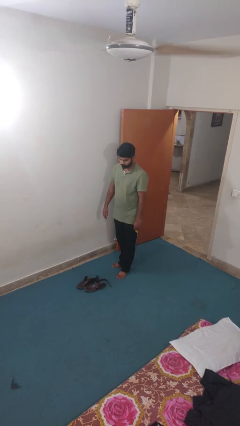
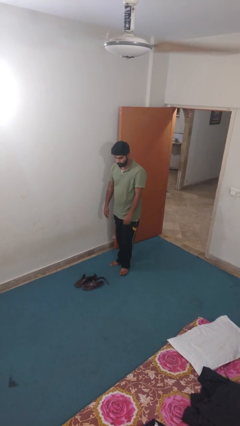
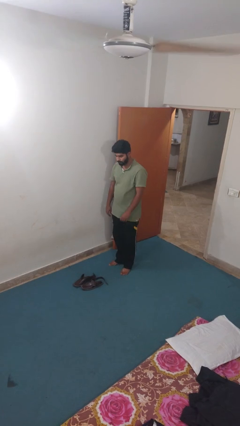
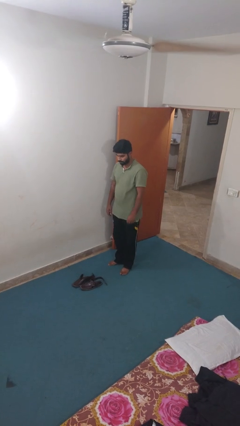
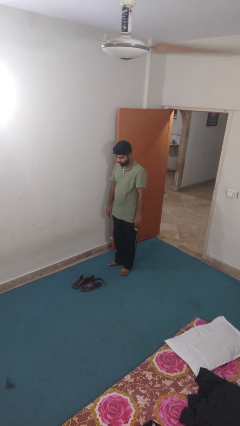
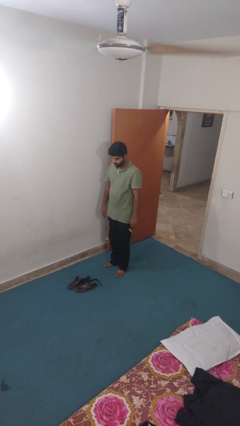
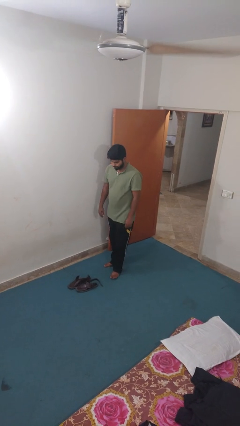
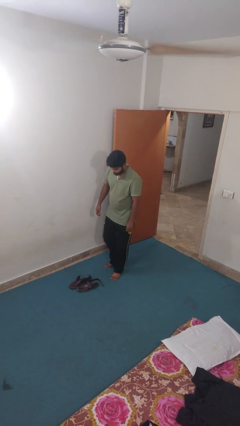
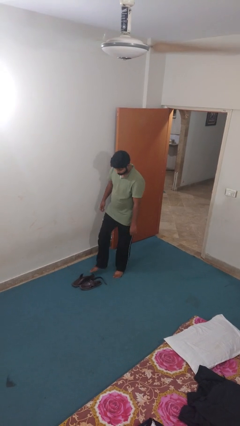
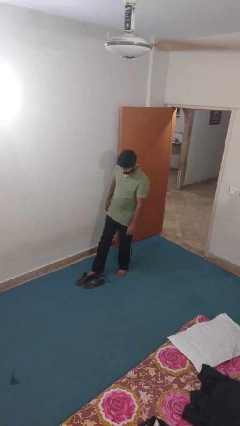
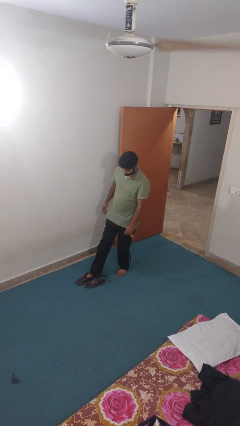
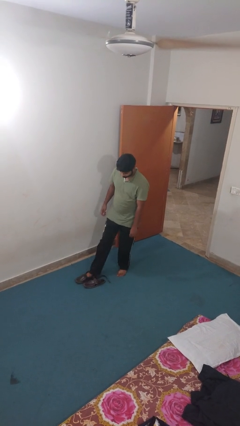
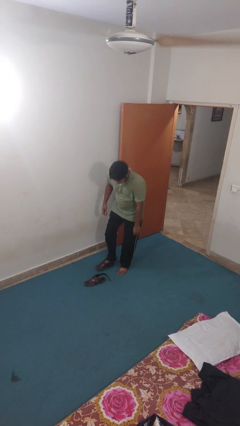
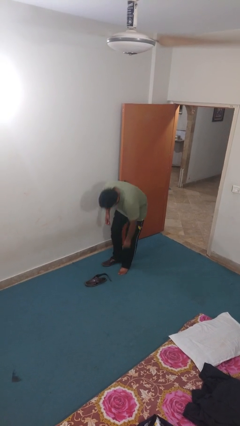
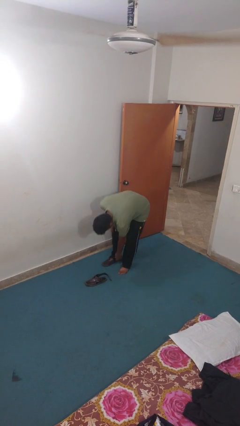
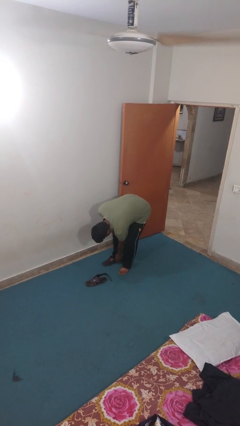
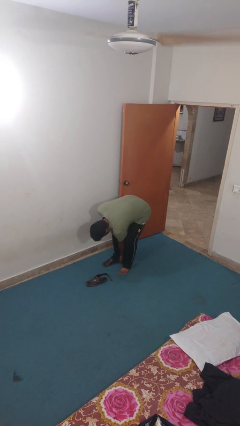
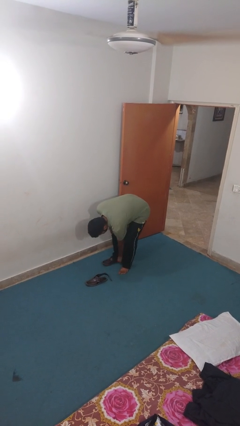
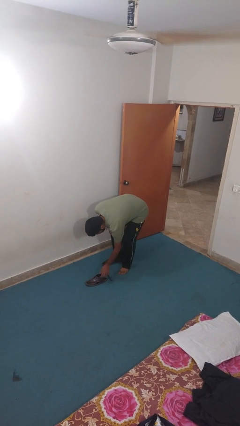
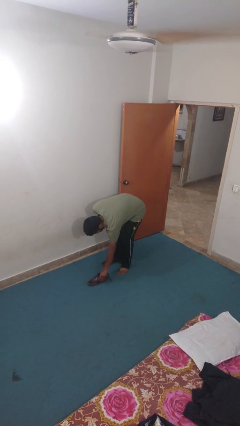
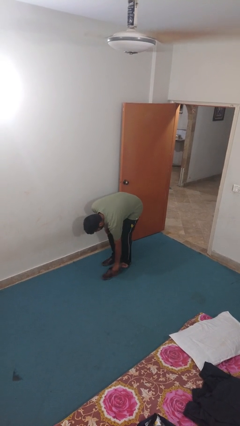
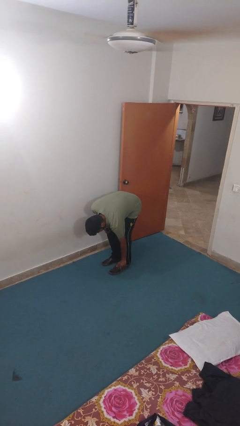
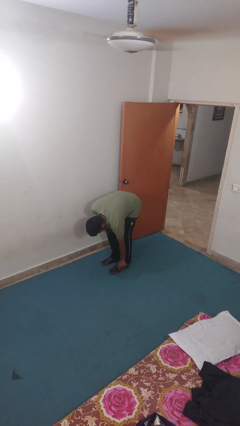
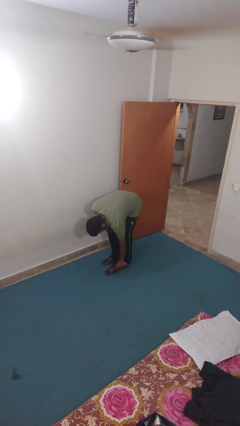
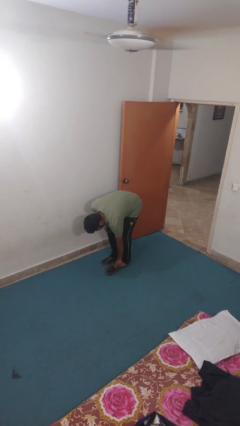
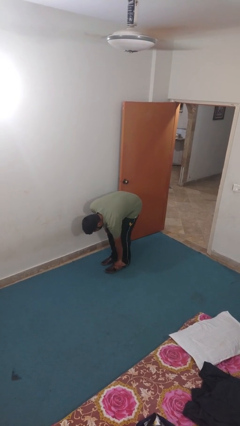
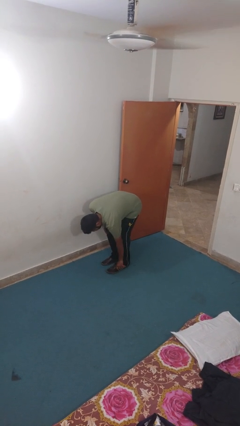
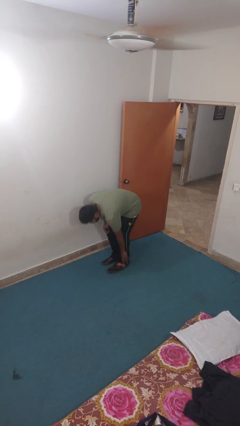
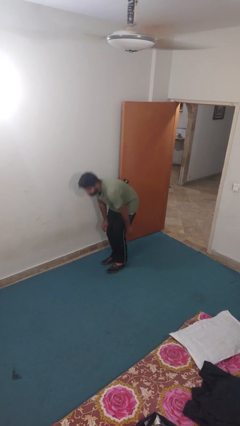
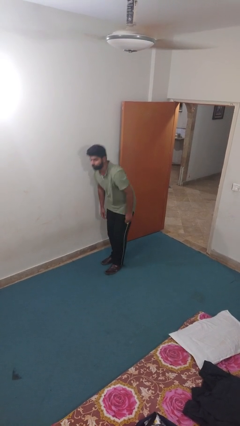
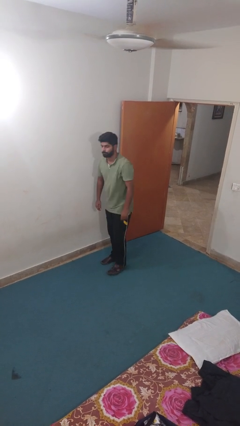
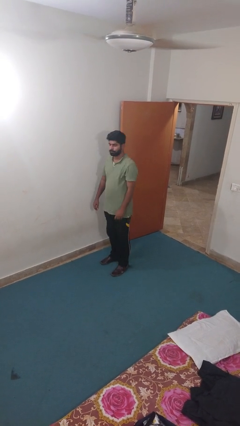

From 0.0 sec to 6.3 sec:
person puts on shoes

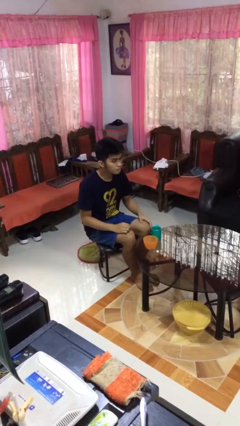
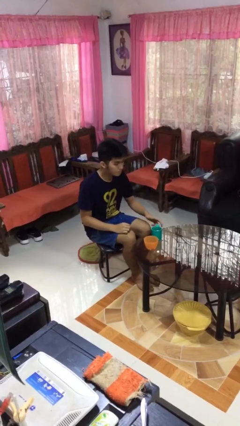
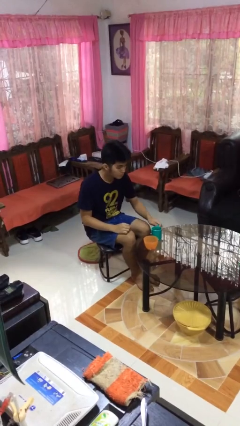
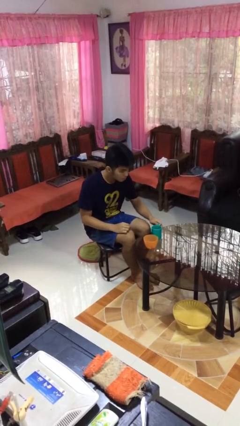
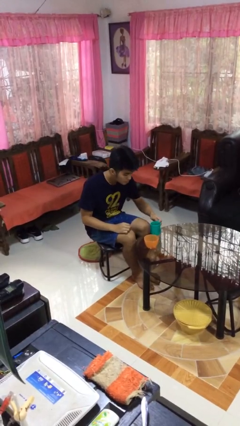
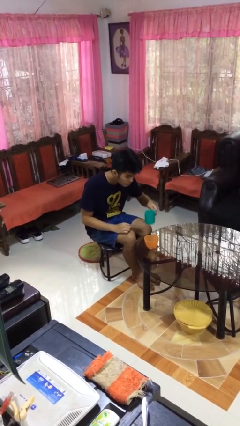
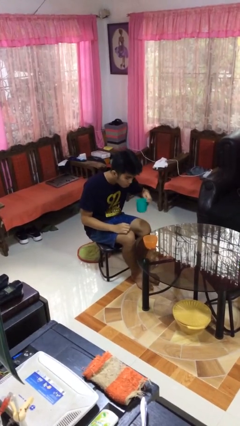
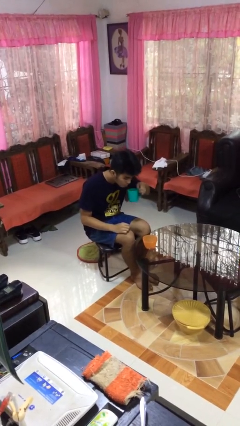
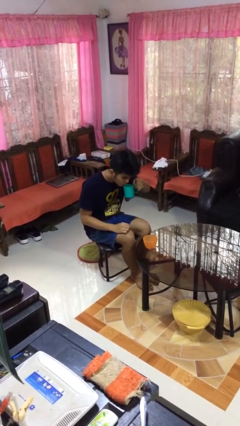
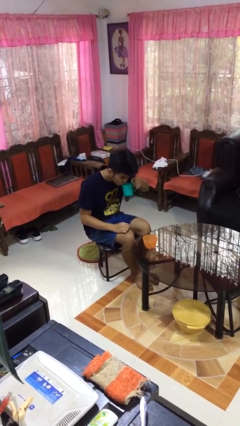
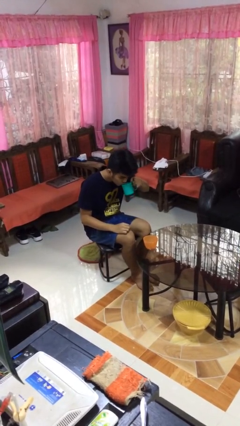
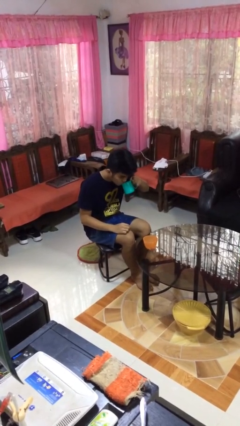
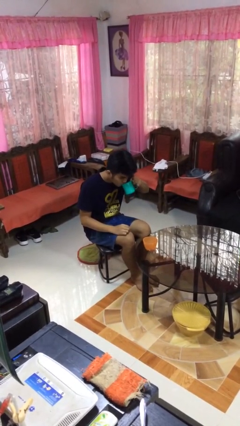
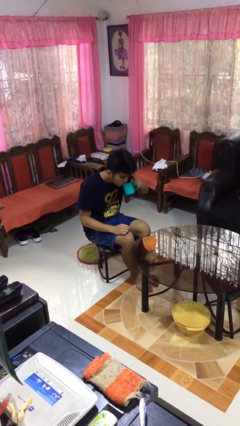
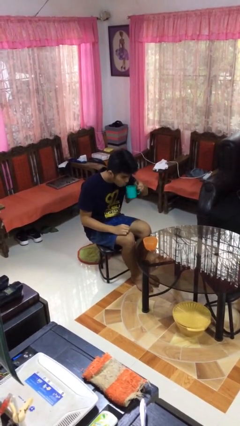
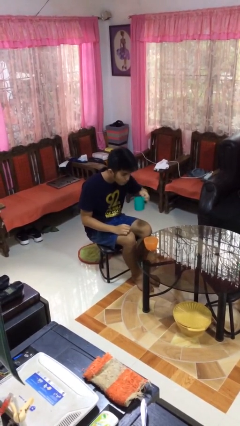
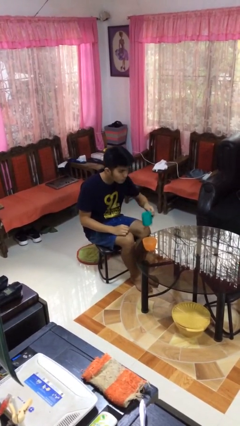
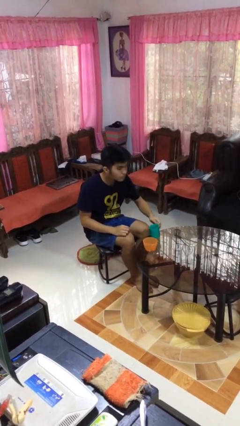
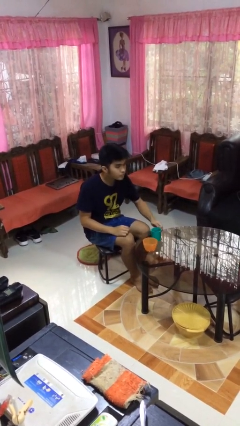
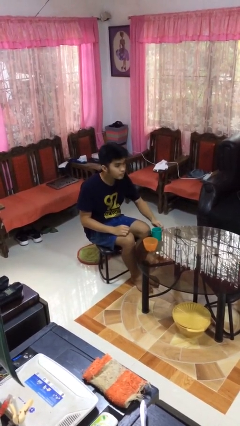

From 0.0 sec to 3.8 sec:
person drinks from cup

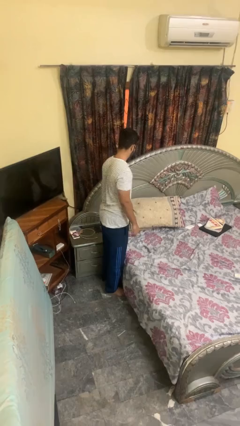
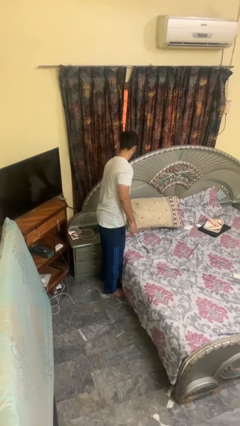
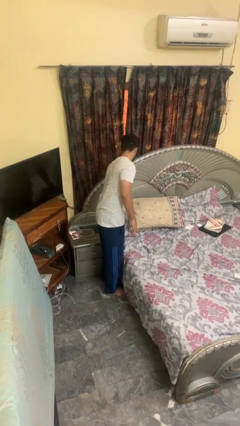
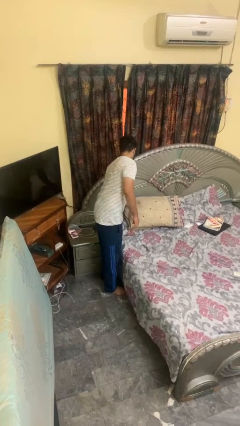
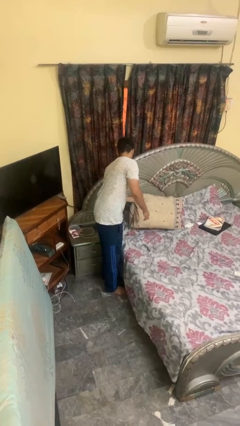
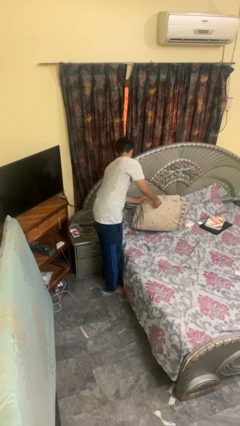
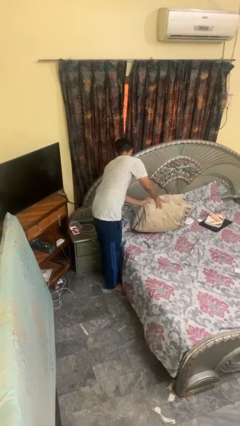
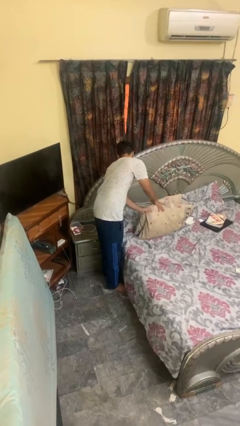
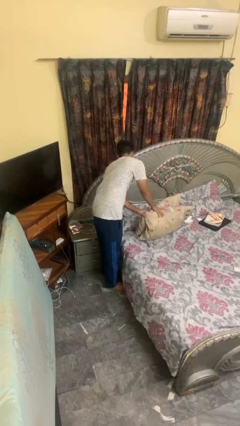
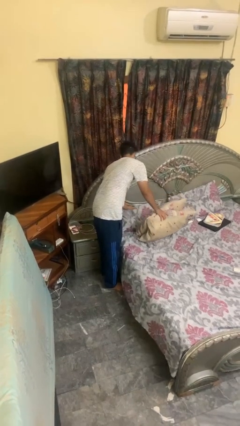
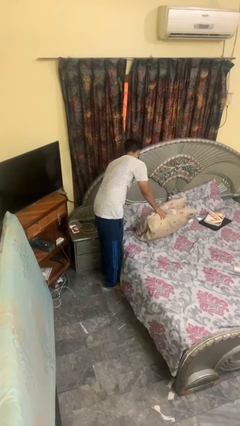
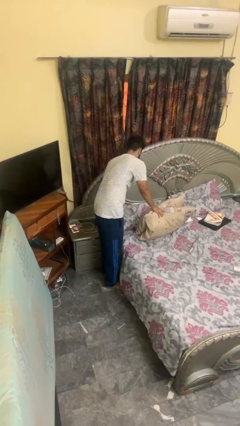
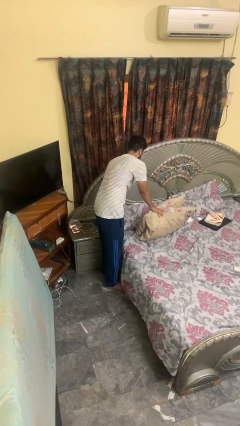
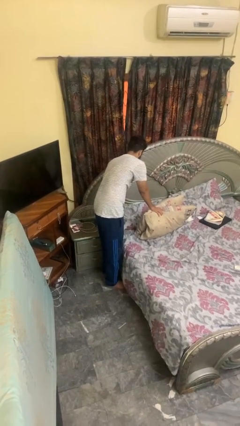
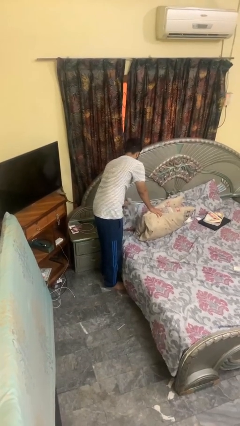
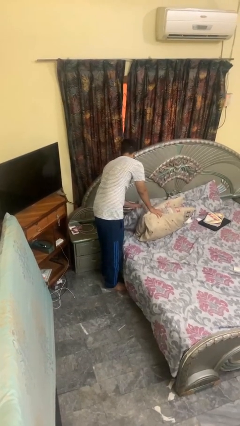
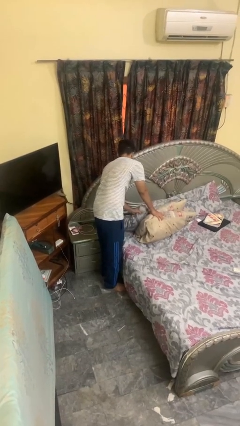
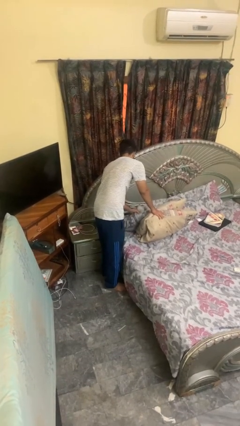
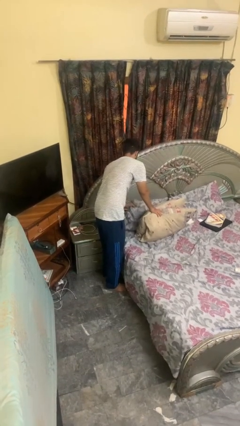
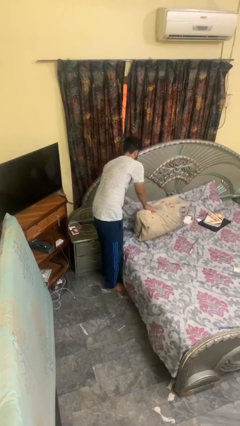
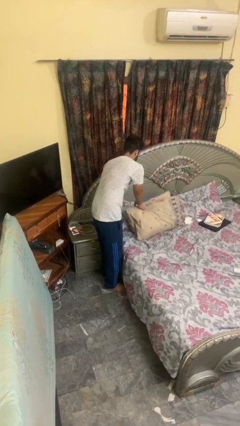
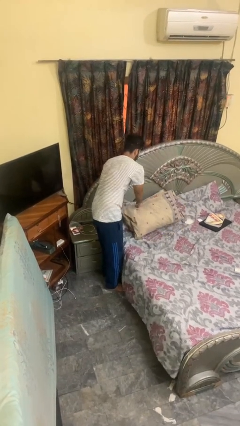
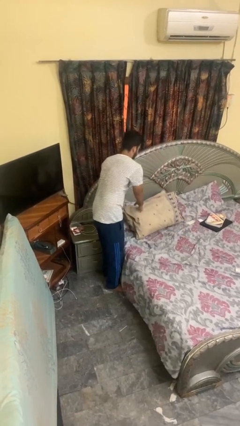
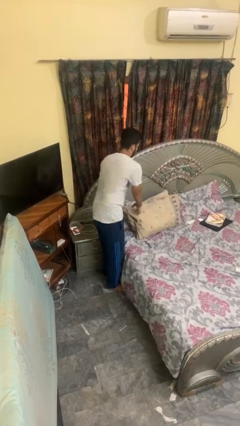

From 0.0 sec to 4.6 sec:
person searches under bed

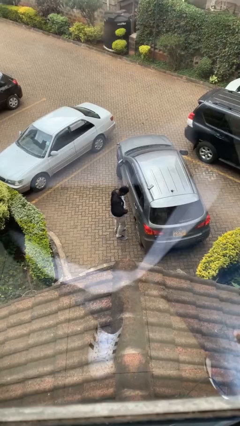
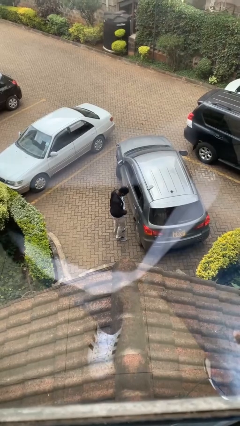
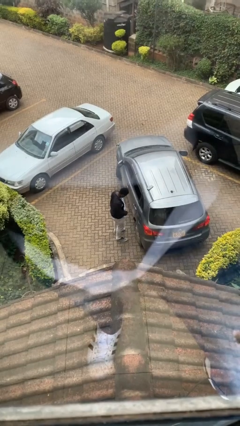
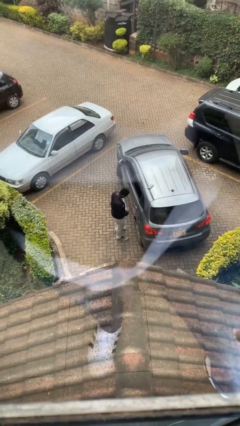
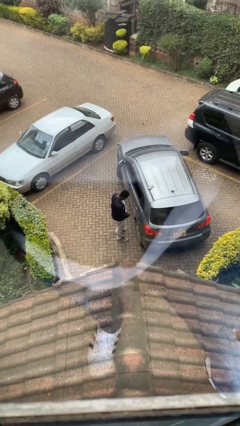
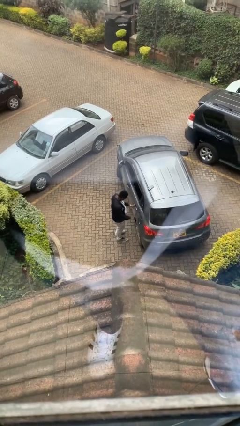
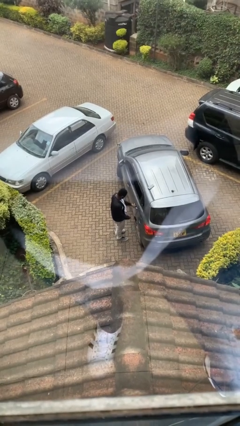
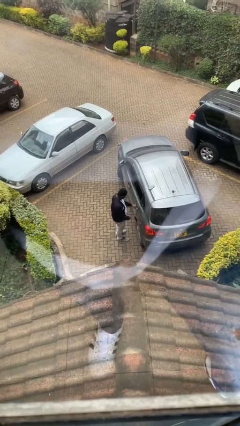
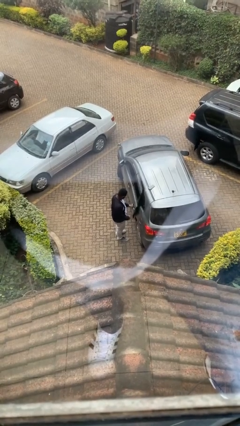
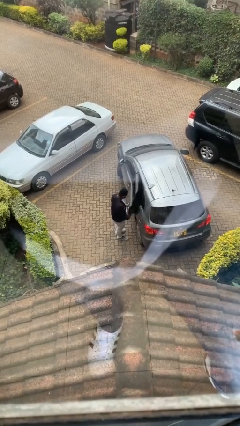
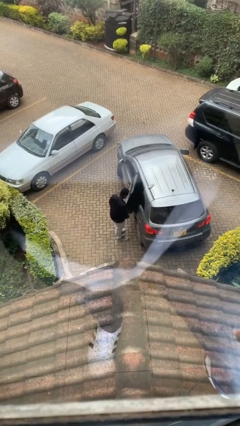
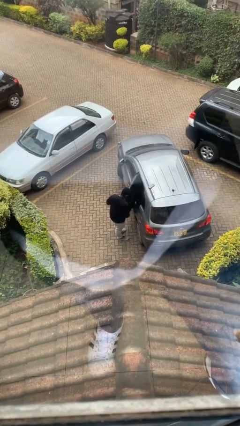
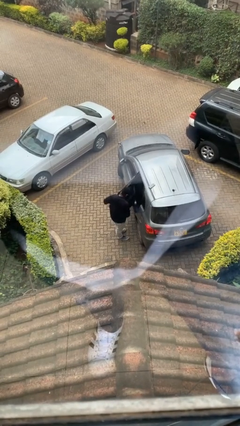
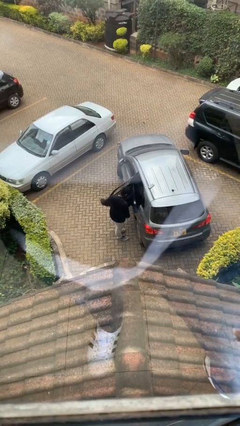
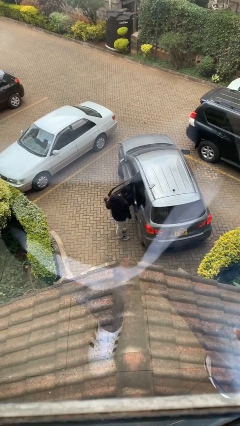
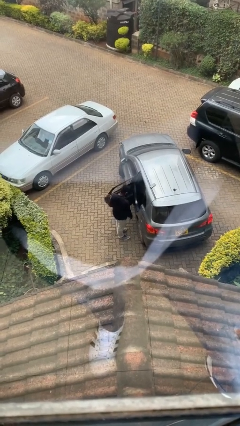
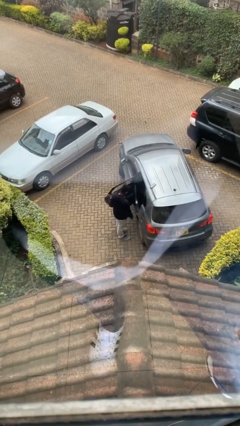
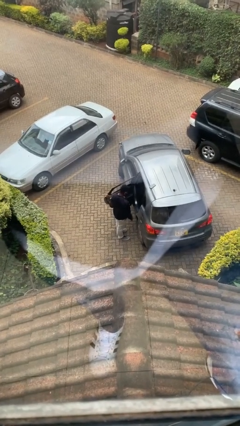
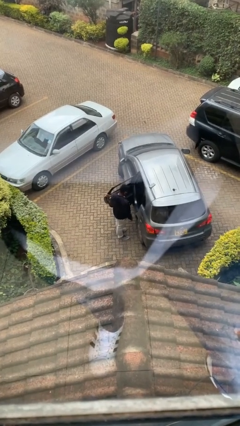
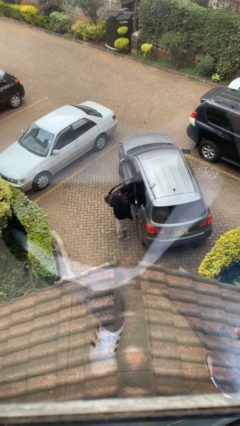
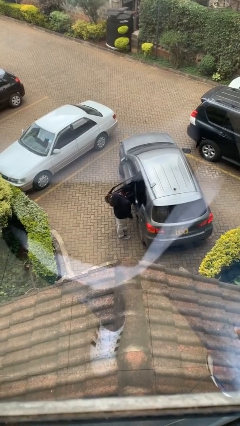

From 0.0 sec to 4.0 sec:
person opens car door
